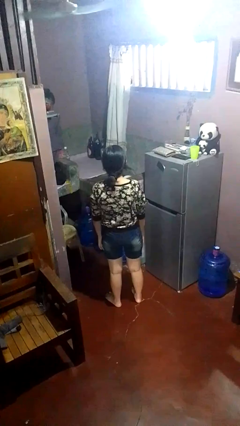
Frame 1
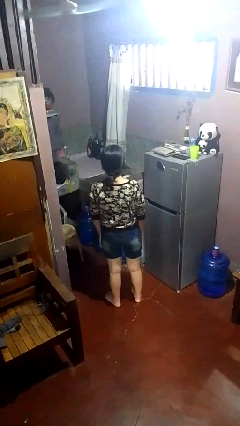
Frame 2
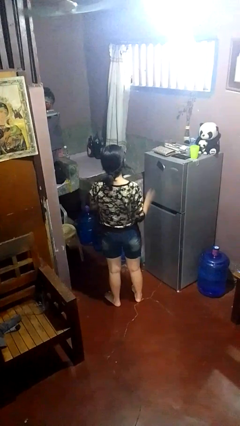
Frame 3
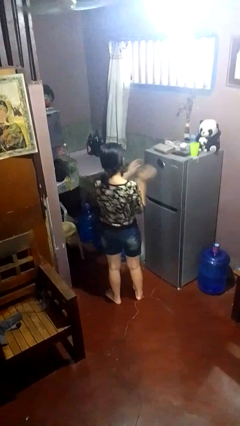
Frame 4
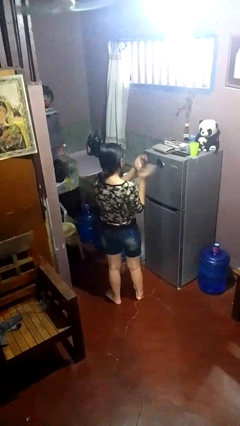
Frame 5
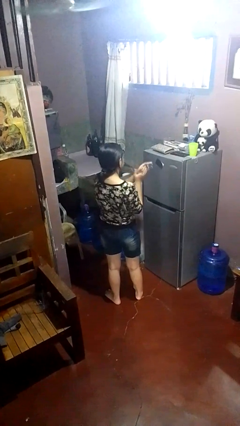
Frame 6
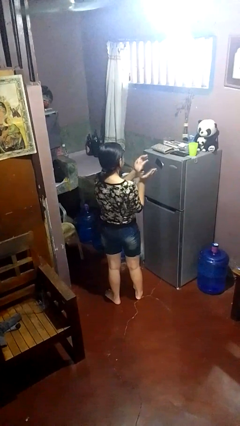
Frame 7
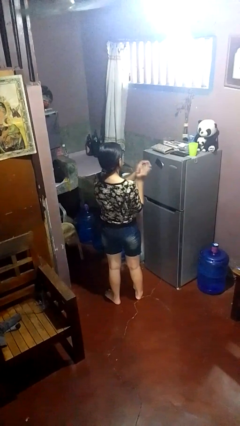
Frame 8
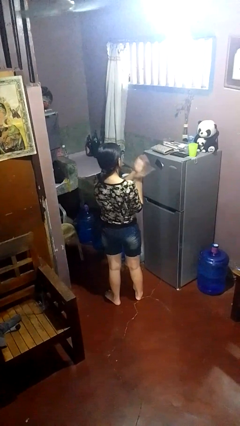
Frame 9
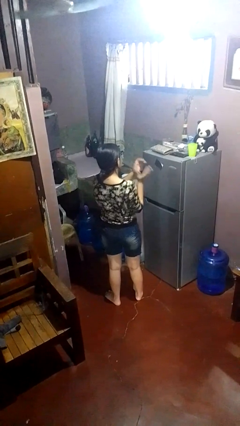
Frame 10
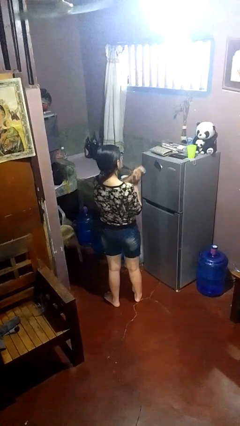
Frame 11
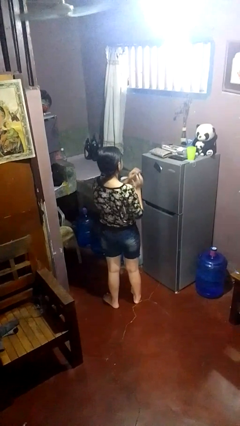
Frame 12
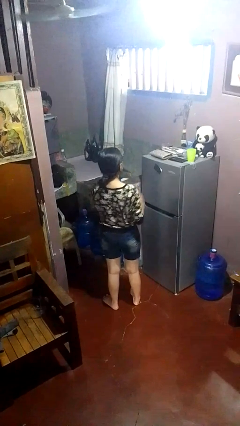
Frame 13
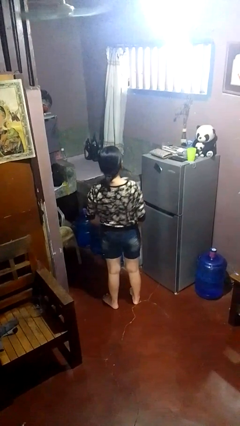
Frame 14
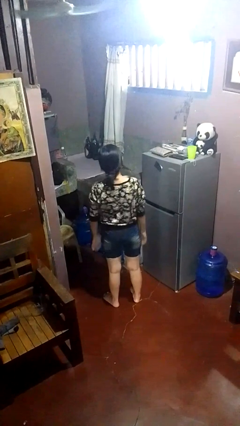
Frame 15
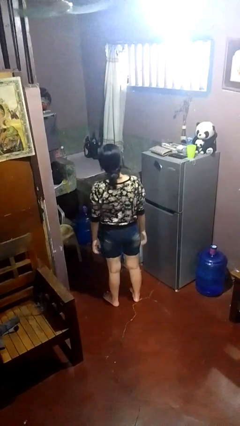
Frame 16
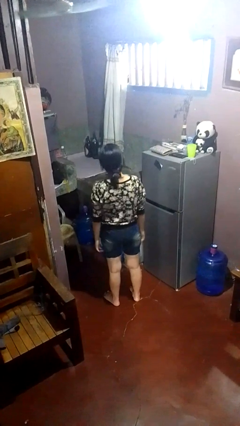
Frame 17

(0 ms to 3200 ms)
person claps hands

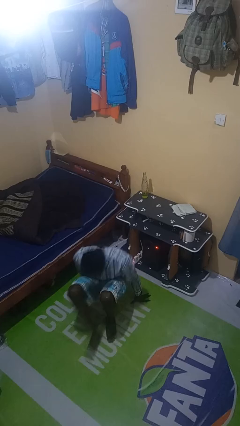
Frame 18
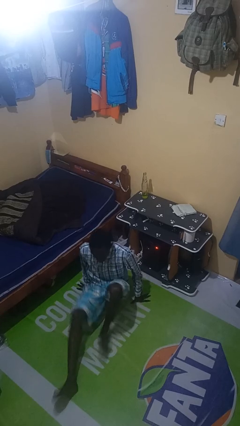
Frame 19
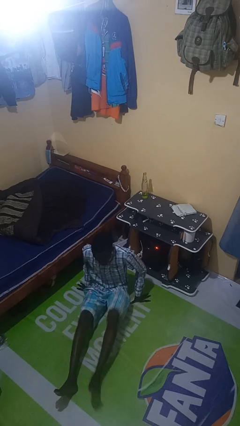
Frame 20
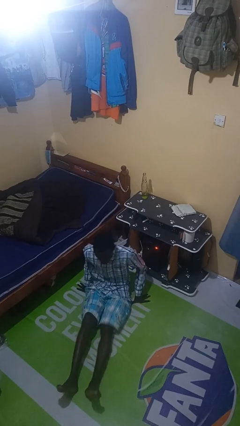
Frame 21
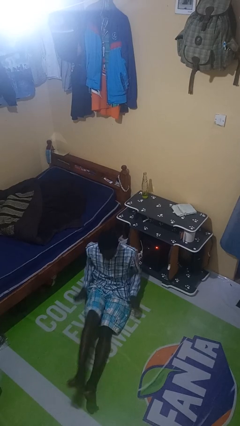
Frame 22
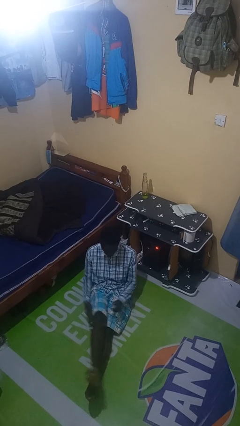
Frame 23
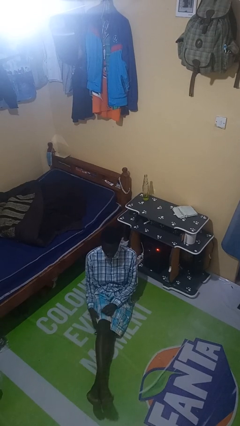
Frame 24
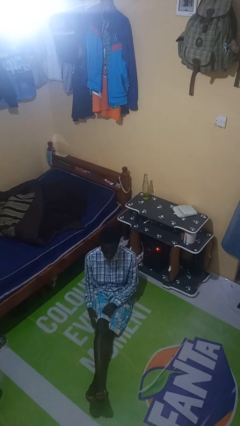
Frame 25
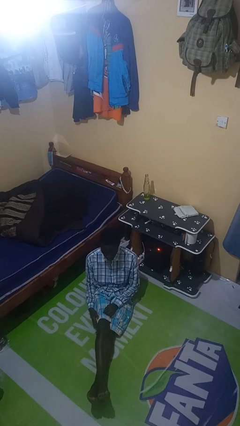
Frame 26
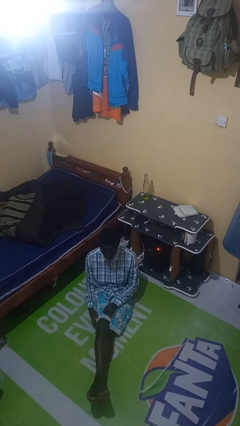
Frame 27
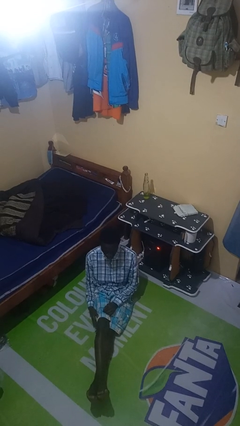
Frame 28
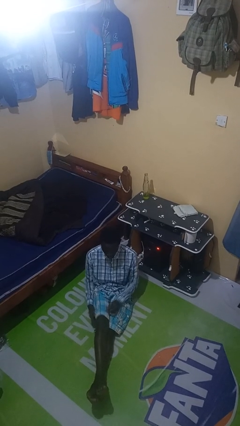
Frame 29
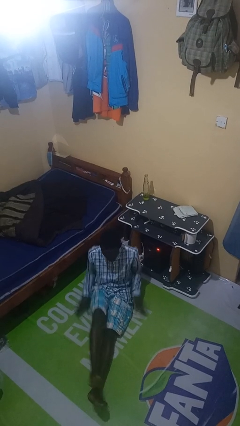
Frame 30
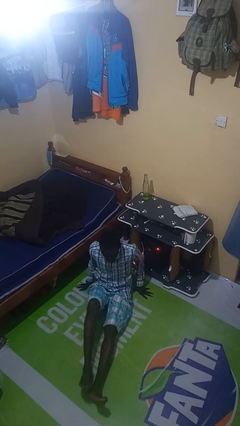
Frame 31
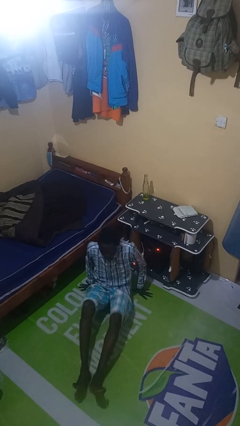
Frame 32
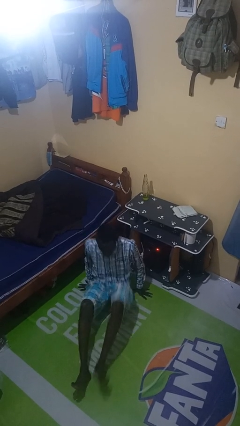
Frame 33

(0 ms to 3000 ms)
person sits crisscross

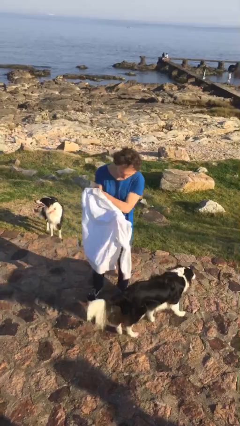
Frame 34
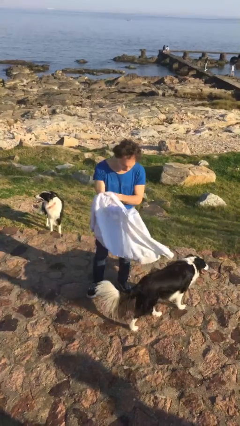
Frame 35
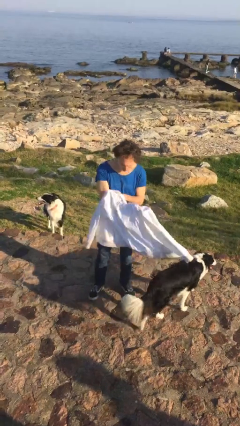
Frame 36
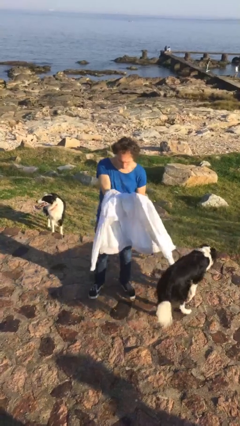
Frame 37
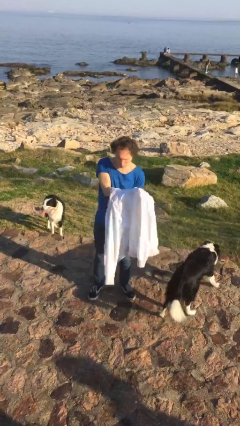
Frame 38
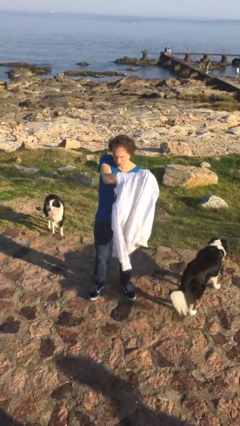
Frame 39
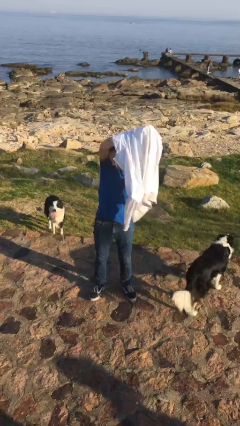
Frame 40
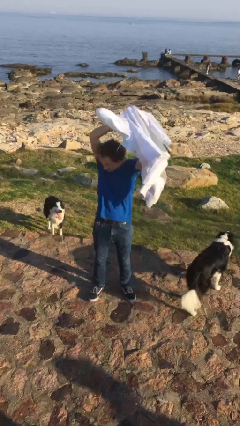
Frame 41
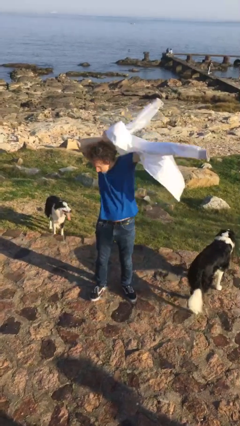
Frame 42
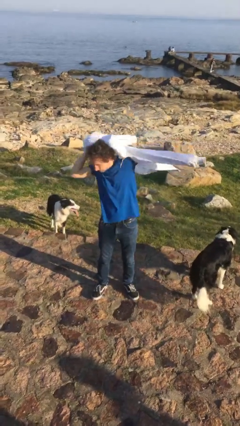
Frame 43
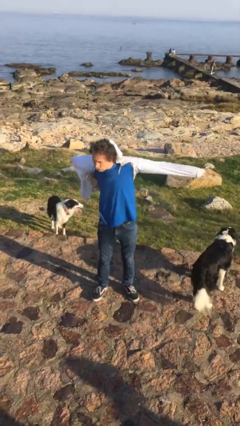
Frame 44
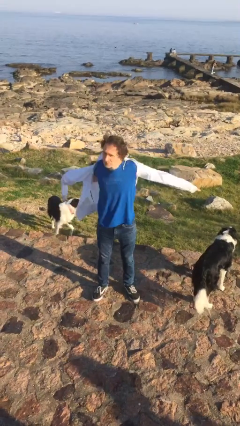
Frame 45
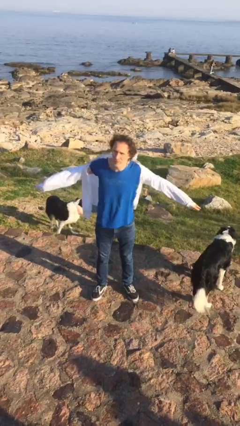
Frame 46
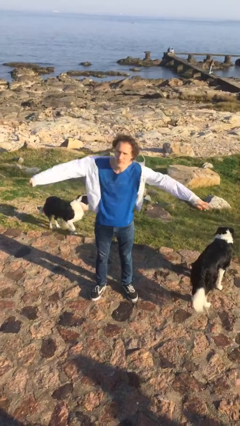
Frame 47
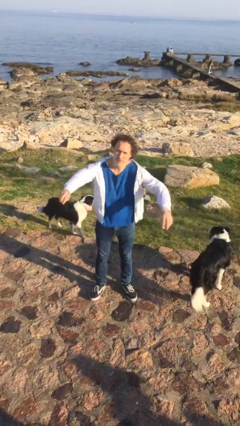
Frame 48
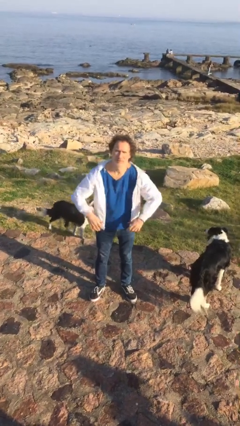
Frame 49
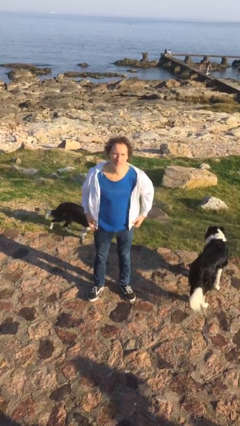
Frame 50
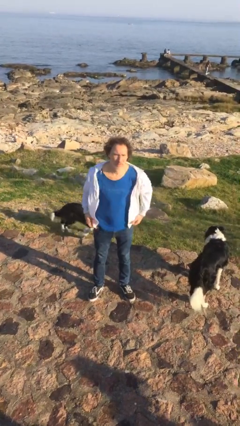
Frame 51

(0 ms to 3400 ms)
person puts on jacket

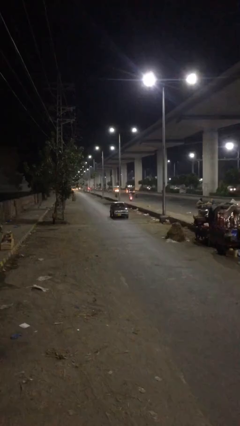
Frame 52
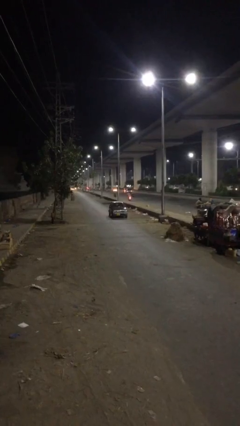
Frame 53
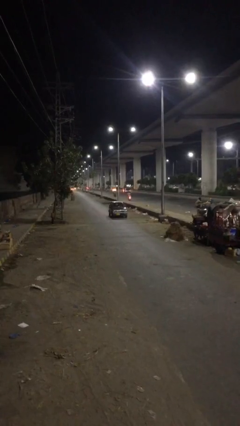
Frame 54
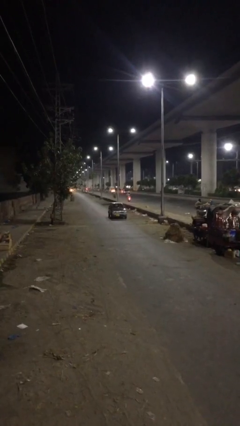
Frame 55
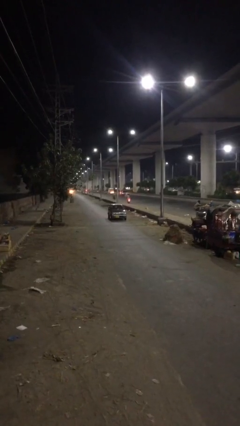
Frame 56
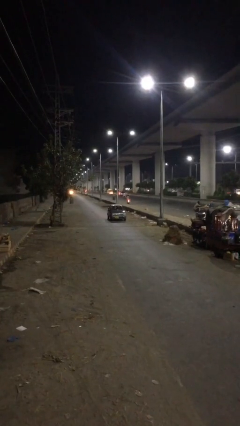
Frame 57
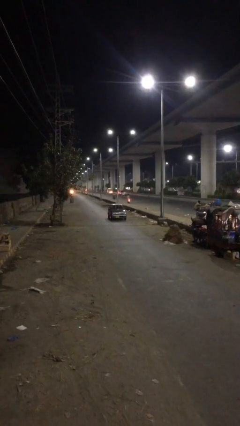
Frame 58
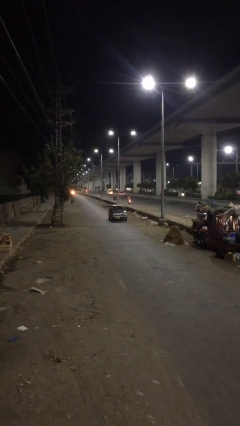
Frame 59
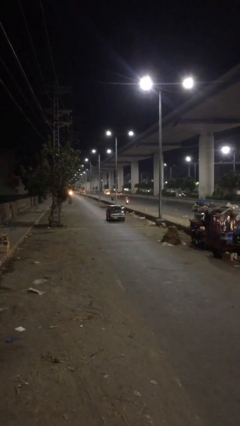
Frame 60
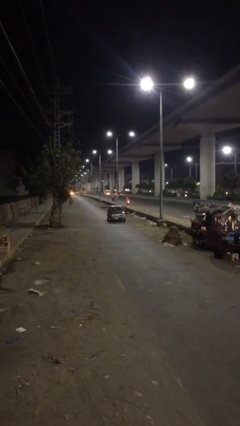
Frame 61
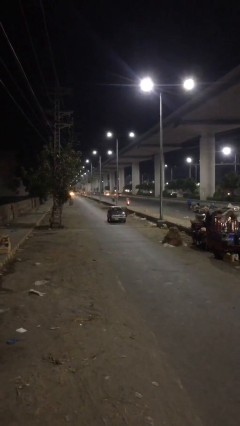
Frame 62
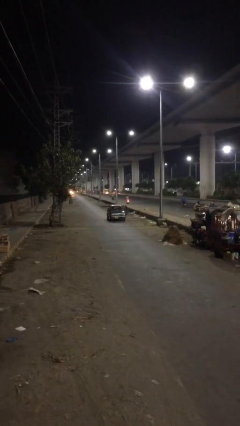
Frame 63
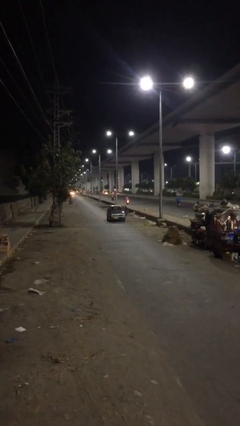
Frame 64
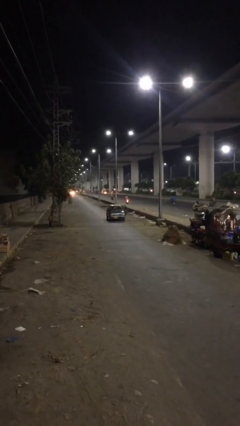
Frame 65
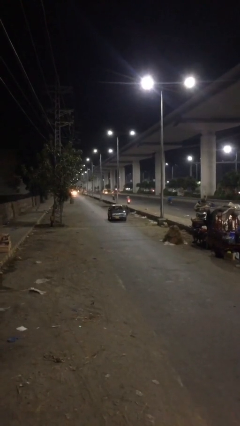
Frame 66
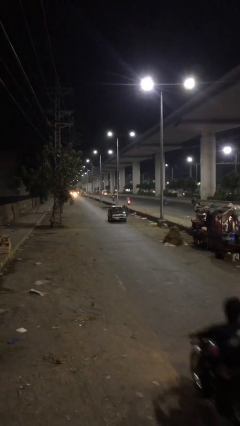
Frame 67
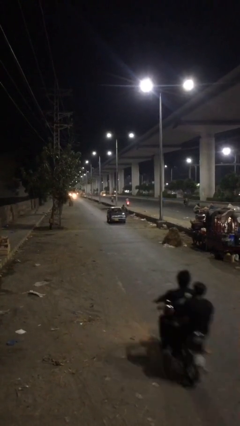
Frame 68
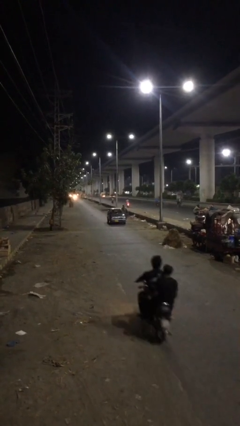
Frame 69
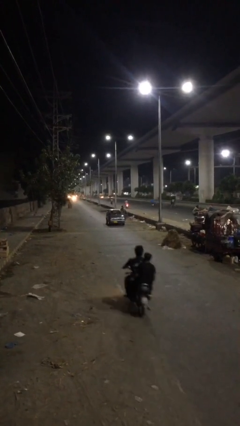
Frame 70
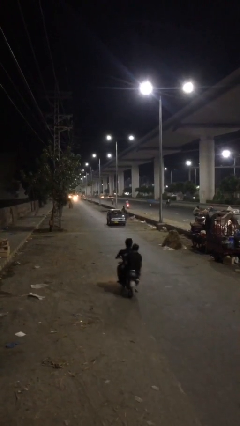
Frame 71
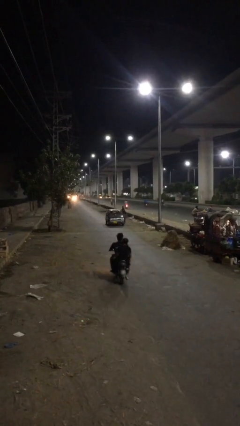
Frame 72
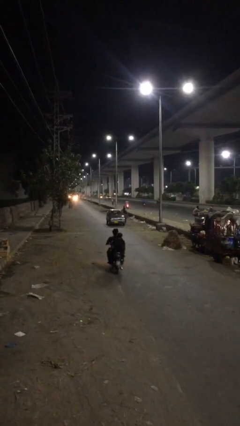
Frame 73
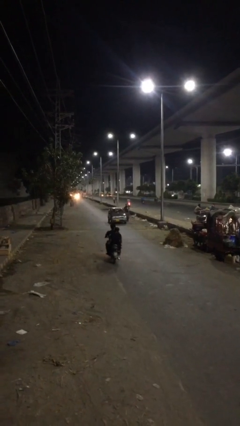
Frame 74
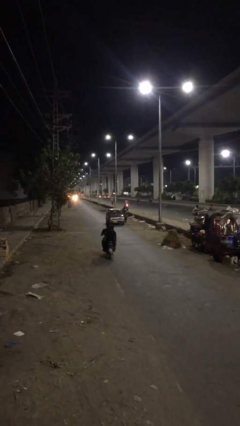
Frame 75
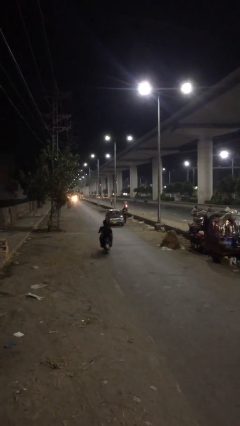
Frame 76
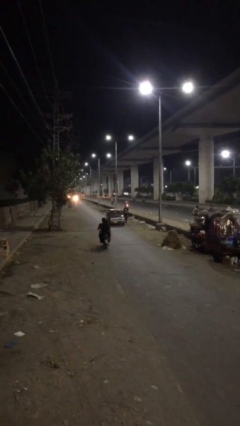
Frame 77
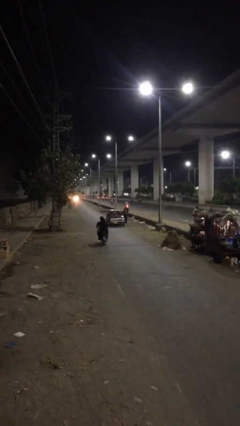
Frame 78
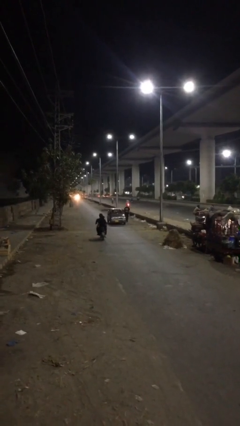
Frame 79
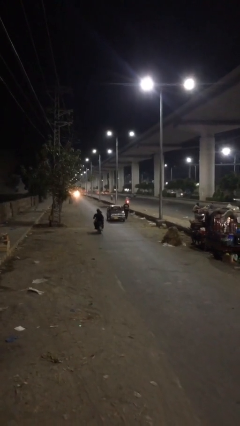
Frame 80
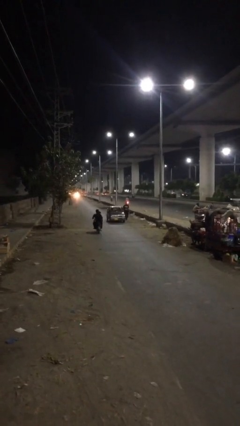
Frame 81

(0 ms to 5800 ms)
car drops off person

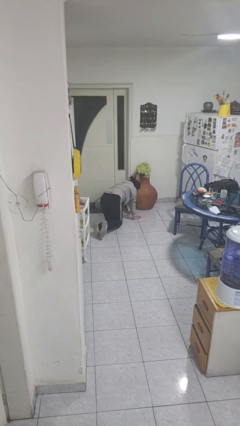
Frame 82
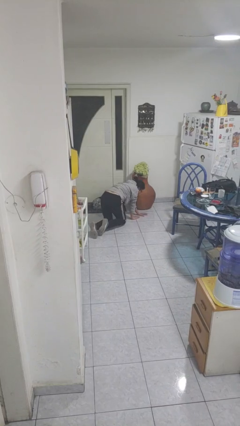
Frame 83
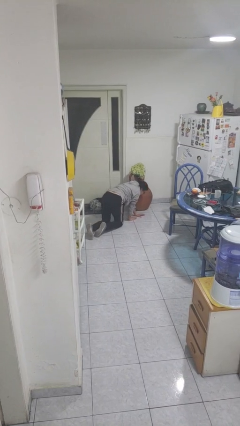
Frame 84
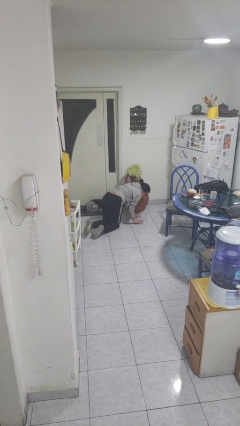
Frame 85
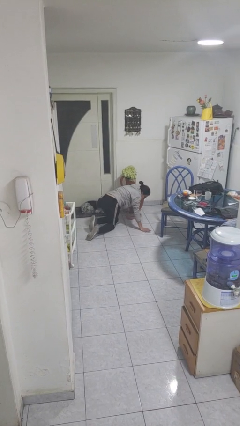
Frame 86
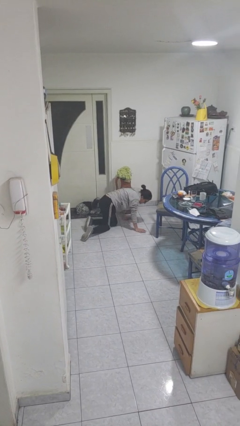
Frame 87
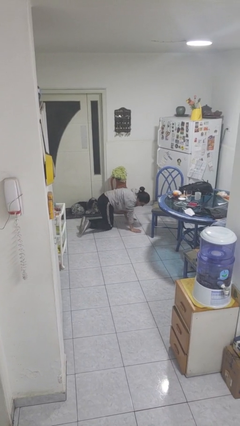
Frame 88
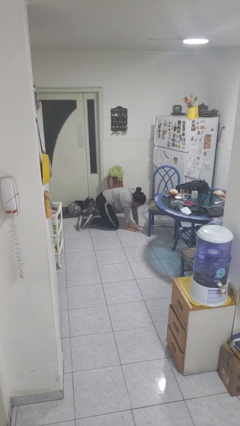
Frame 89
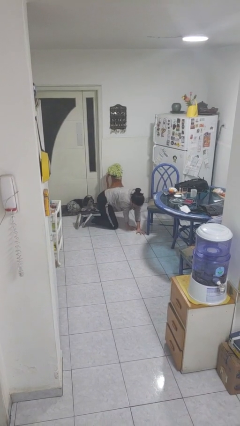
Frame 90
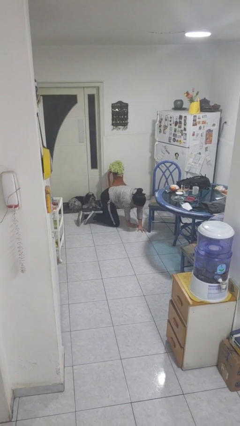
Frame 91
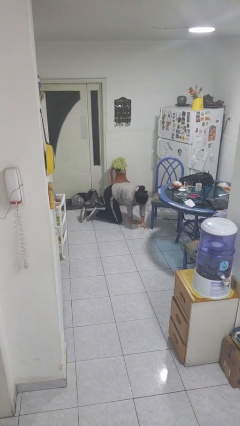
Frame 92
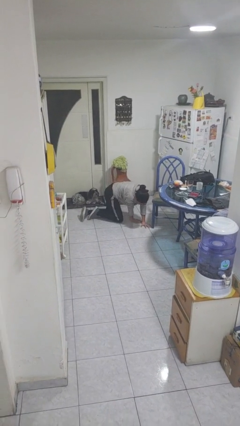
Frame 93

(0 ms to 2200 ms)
person crawls

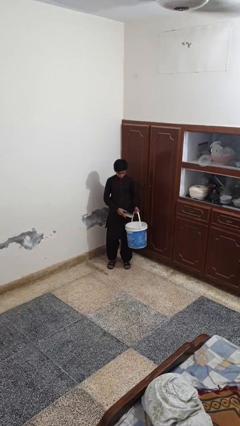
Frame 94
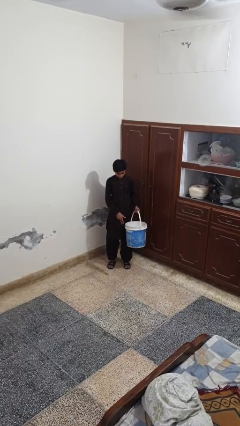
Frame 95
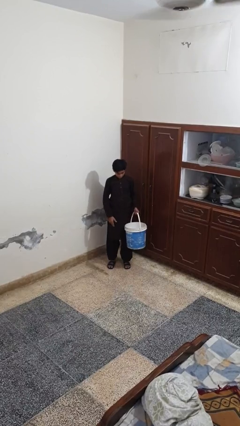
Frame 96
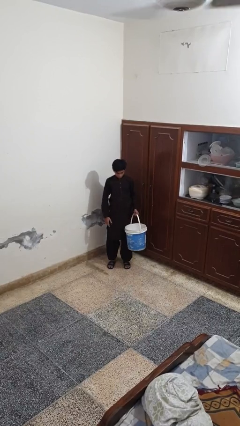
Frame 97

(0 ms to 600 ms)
person puts object into basket
